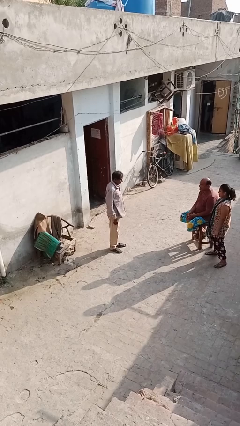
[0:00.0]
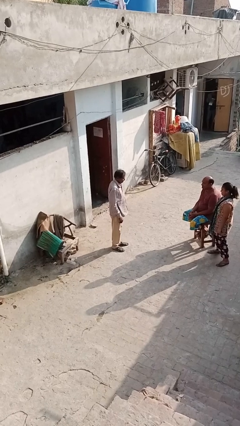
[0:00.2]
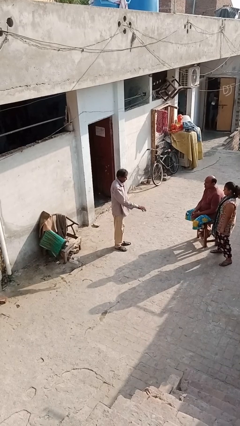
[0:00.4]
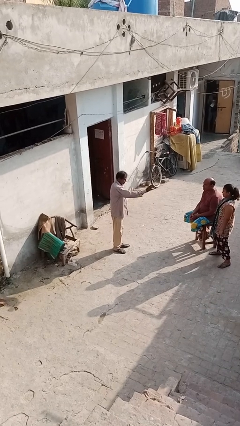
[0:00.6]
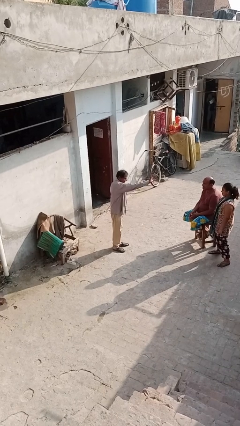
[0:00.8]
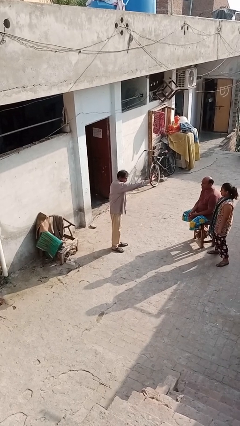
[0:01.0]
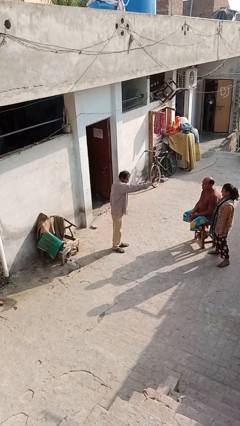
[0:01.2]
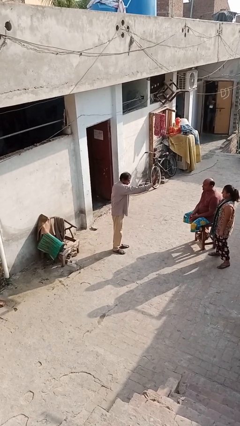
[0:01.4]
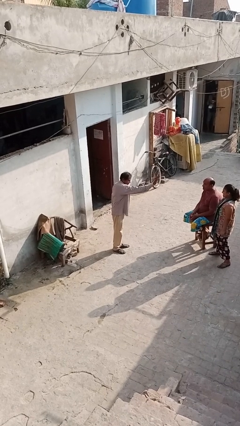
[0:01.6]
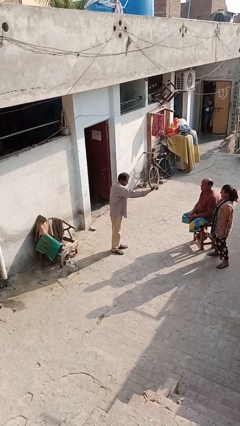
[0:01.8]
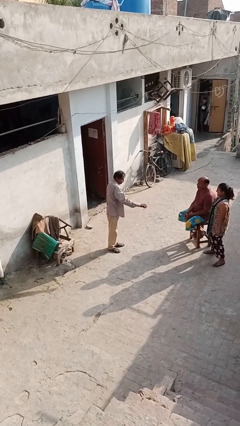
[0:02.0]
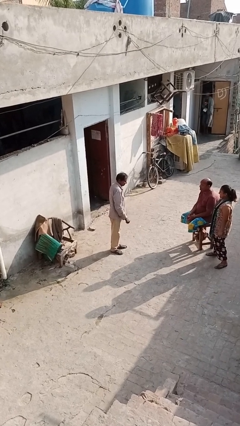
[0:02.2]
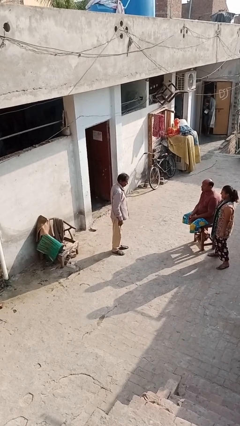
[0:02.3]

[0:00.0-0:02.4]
person waves at person

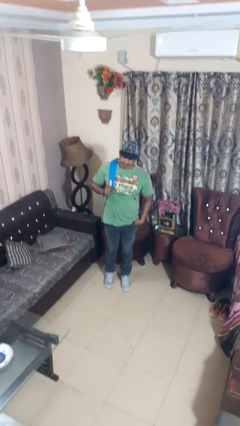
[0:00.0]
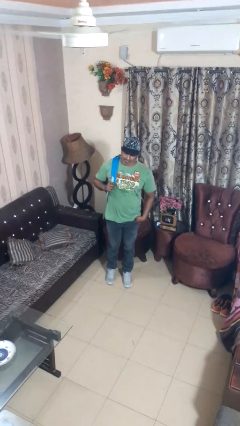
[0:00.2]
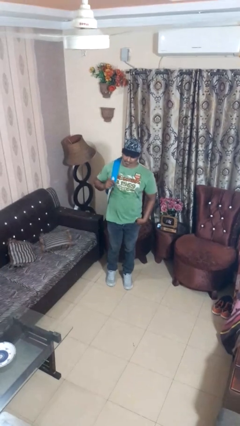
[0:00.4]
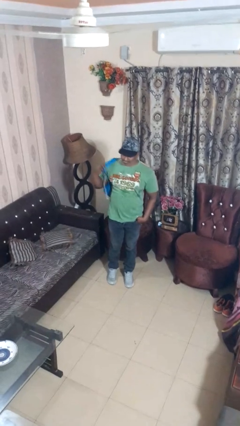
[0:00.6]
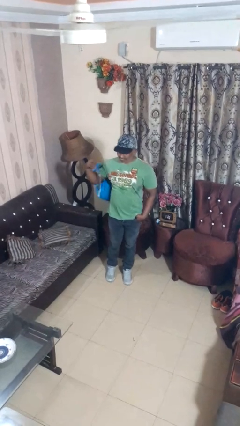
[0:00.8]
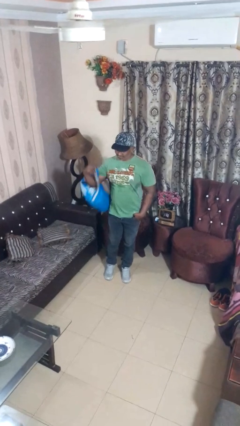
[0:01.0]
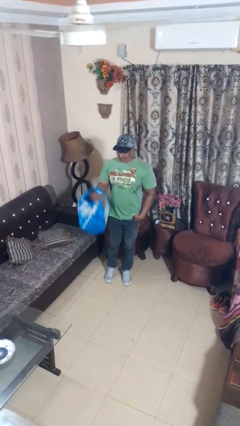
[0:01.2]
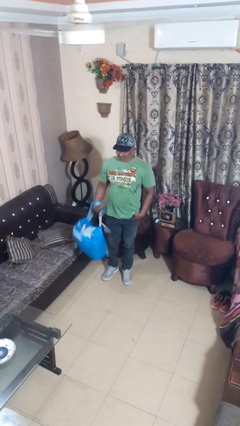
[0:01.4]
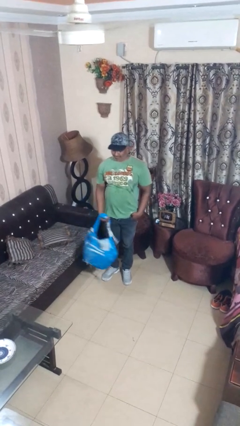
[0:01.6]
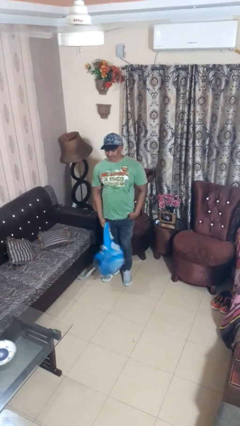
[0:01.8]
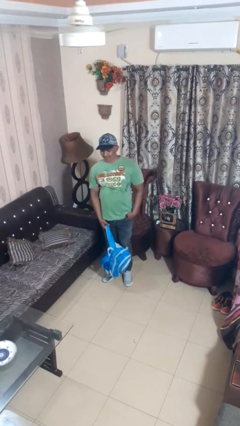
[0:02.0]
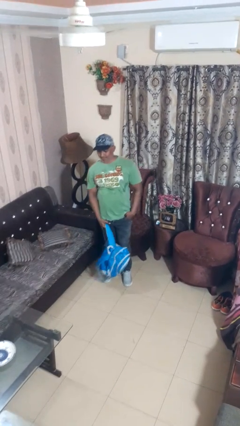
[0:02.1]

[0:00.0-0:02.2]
person takes off backpack

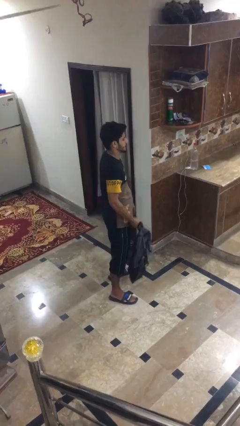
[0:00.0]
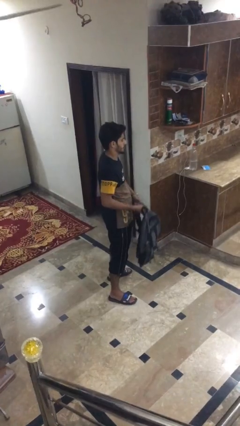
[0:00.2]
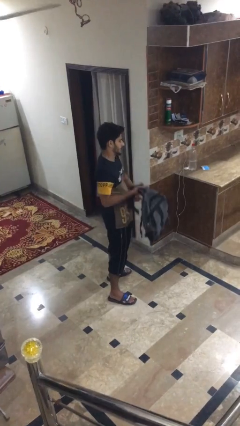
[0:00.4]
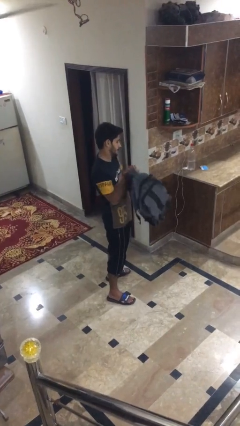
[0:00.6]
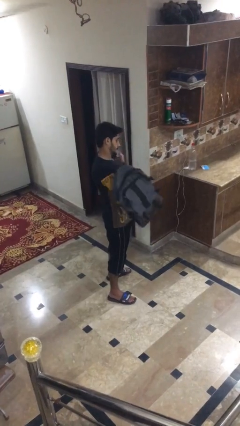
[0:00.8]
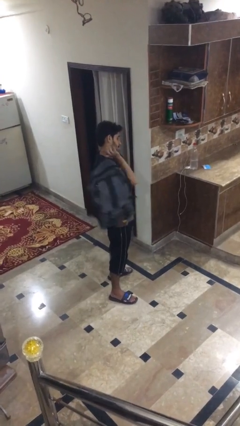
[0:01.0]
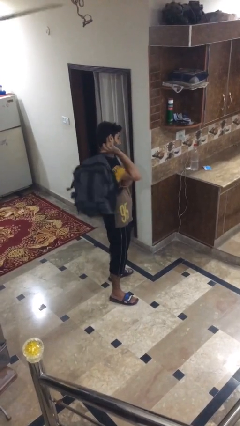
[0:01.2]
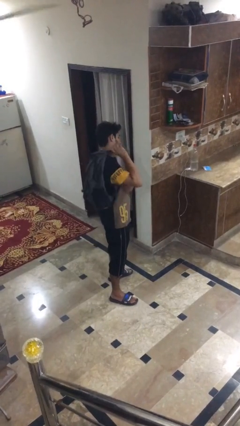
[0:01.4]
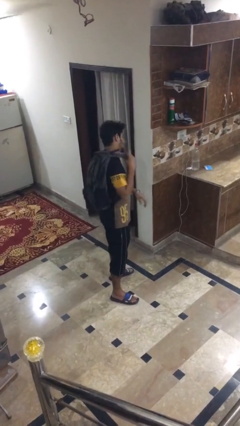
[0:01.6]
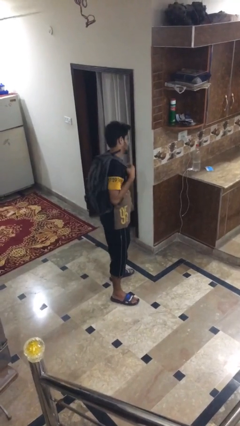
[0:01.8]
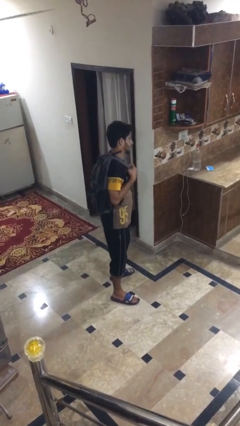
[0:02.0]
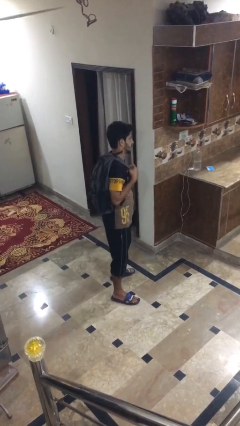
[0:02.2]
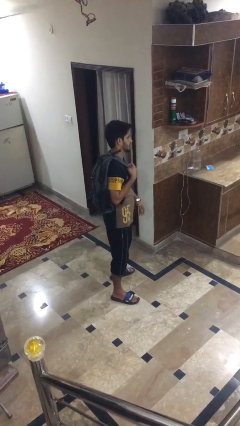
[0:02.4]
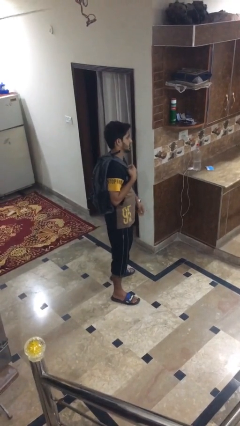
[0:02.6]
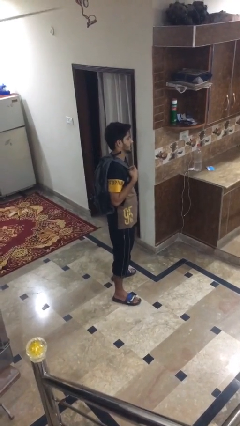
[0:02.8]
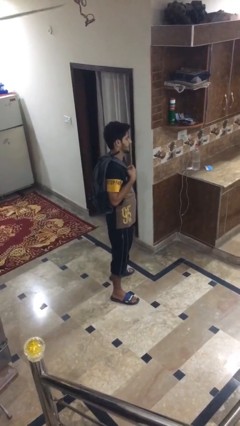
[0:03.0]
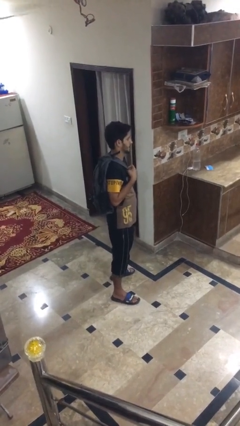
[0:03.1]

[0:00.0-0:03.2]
person puts on backpack

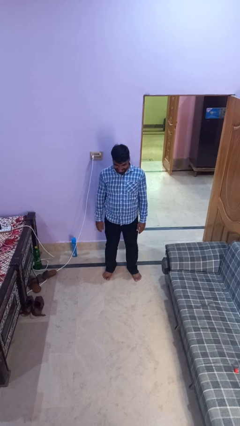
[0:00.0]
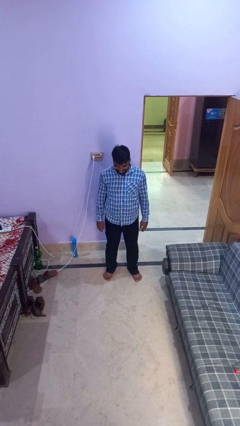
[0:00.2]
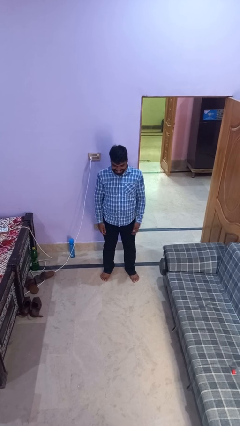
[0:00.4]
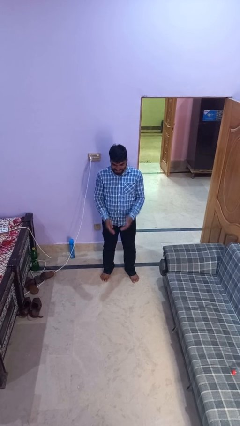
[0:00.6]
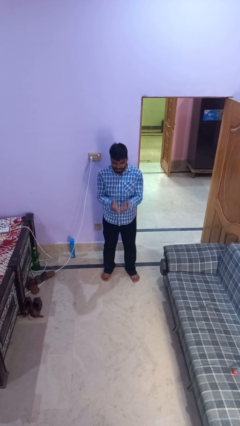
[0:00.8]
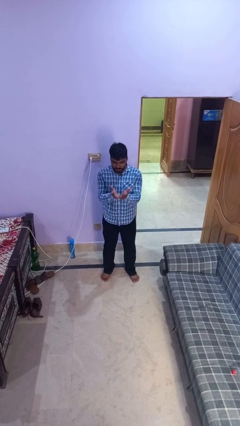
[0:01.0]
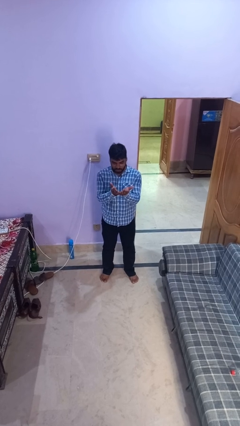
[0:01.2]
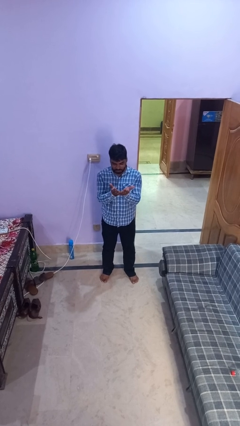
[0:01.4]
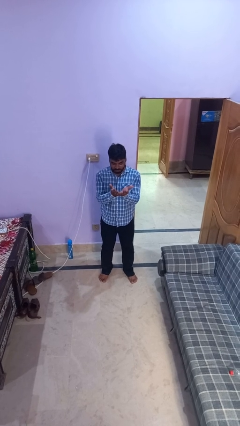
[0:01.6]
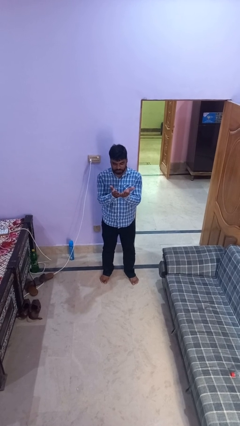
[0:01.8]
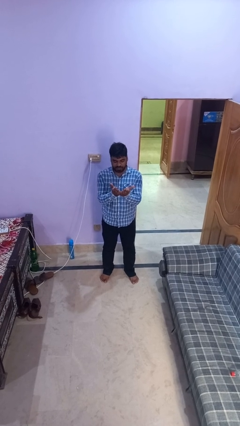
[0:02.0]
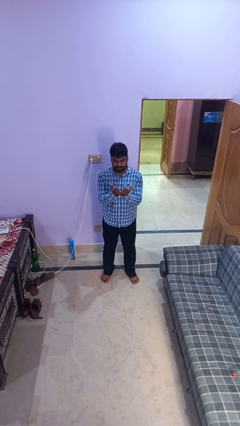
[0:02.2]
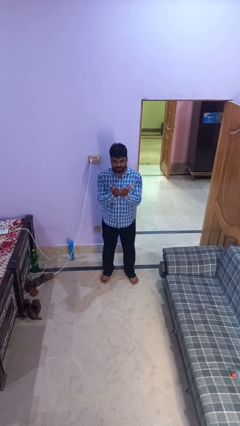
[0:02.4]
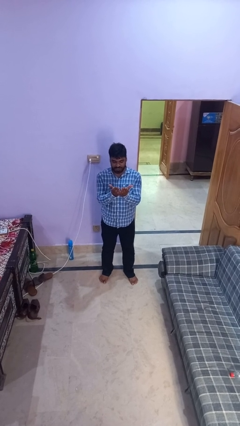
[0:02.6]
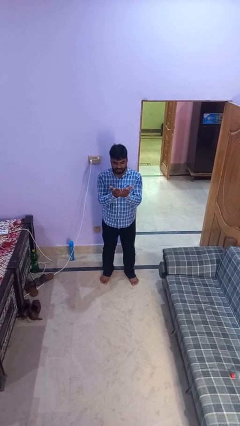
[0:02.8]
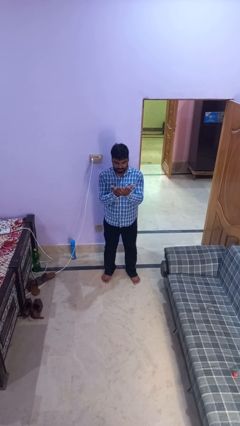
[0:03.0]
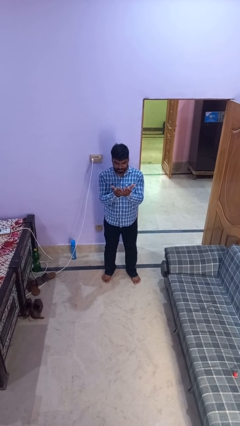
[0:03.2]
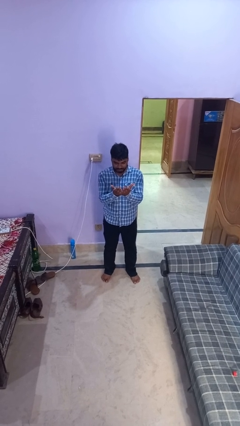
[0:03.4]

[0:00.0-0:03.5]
person prays

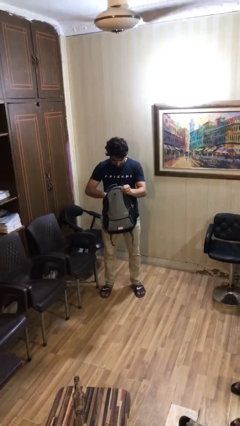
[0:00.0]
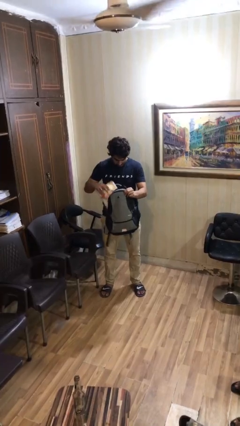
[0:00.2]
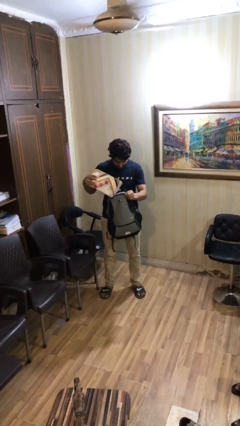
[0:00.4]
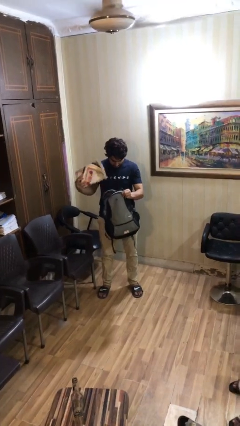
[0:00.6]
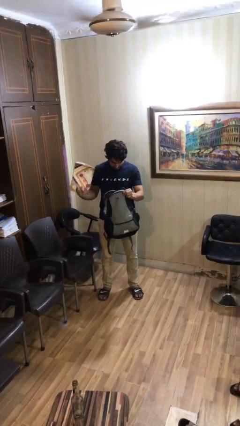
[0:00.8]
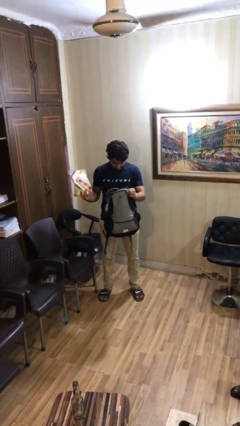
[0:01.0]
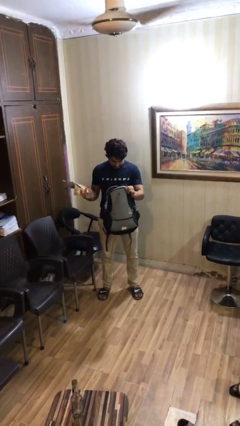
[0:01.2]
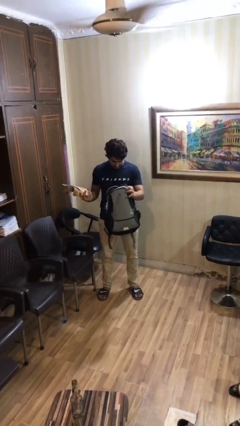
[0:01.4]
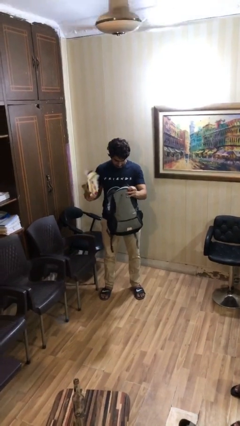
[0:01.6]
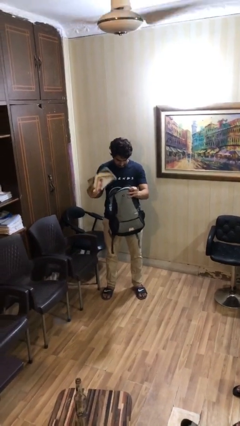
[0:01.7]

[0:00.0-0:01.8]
person takes object from backpack

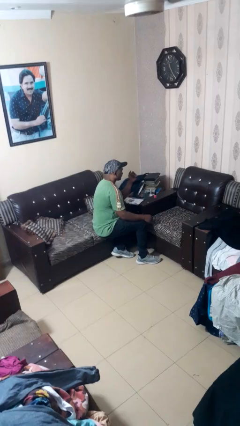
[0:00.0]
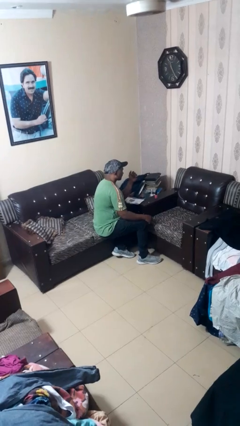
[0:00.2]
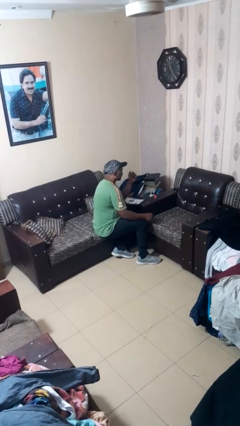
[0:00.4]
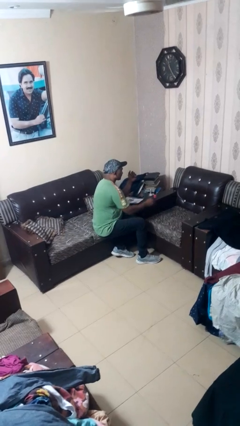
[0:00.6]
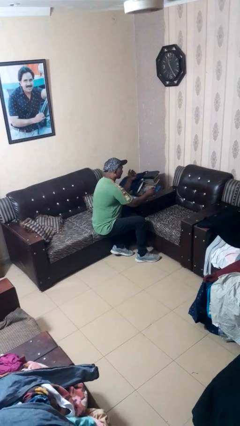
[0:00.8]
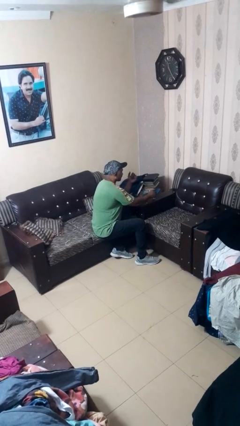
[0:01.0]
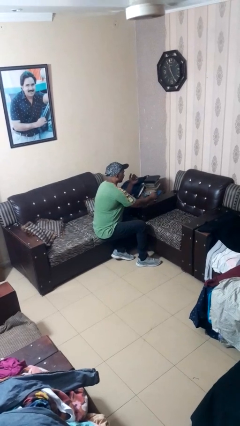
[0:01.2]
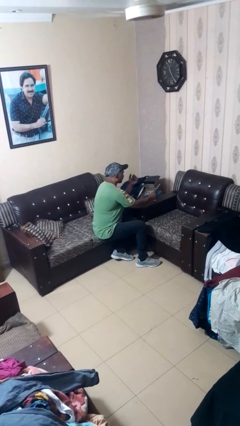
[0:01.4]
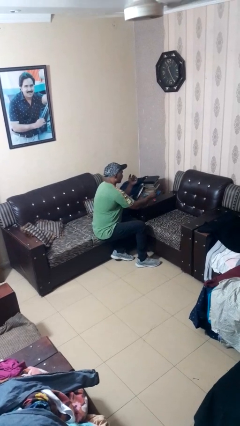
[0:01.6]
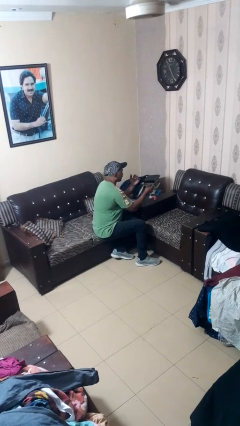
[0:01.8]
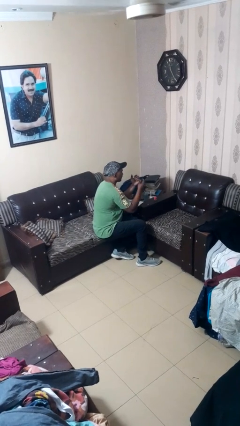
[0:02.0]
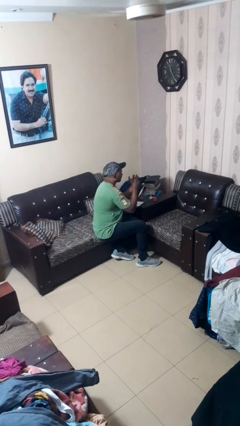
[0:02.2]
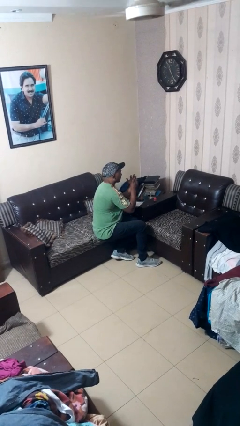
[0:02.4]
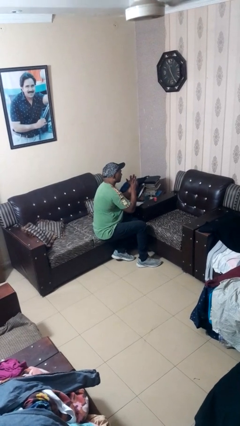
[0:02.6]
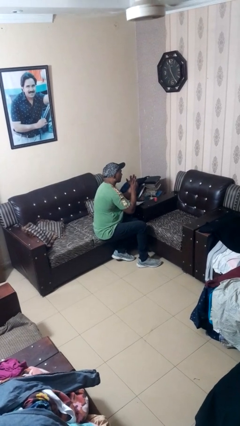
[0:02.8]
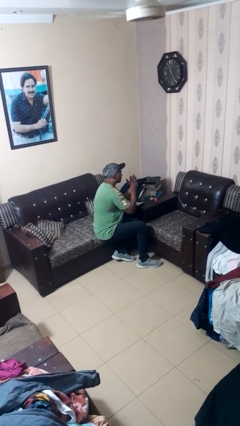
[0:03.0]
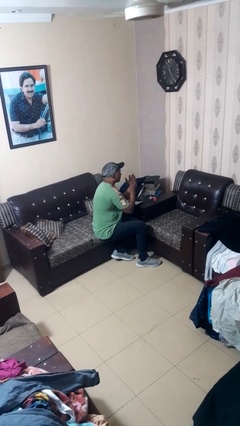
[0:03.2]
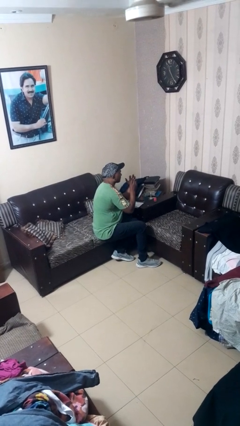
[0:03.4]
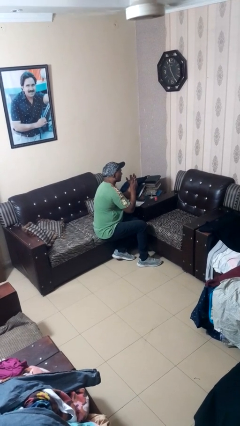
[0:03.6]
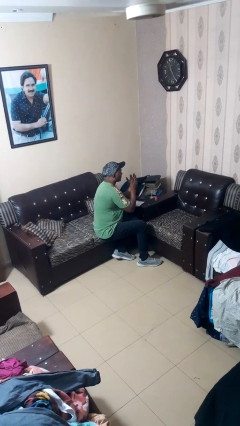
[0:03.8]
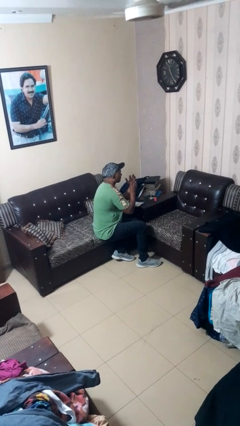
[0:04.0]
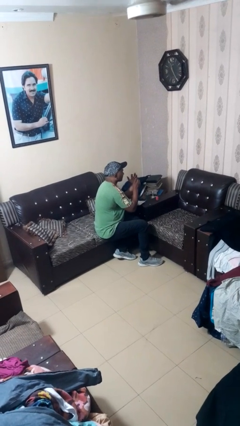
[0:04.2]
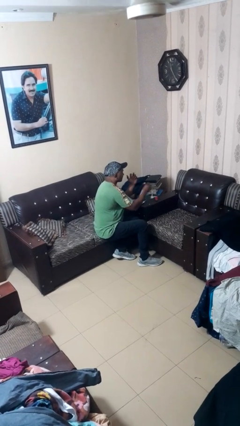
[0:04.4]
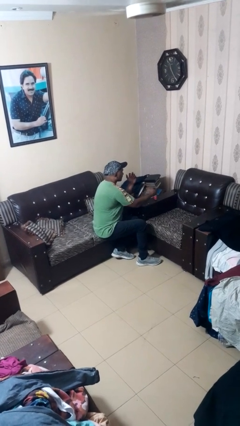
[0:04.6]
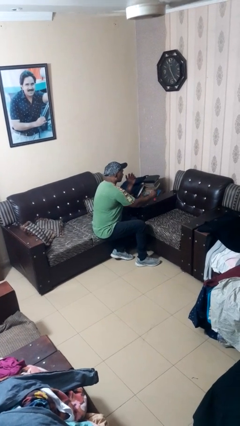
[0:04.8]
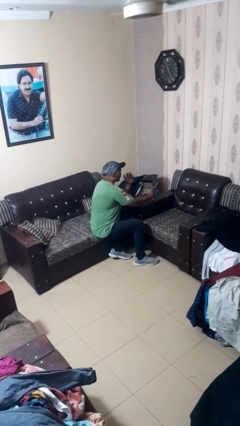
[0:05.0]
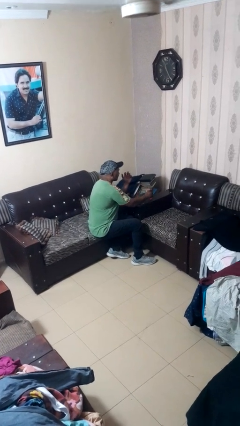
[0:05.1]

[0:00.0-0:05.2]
person paints fingernails
